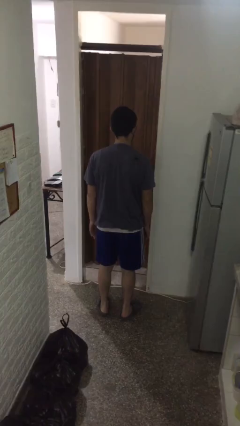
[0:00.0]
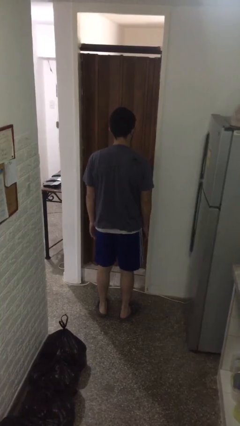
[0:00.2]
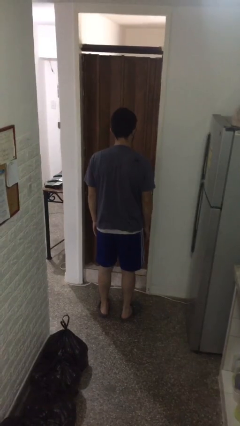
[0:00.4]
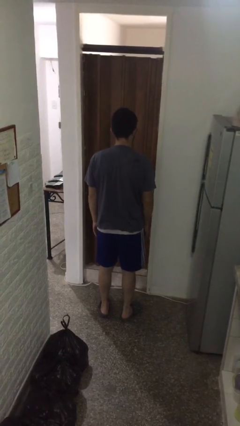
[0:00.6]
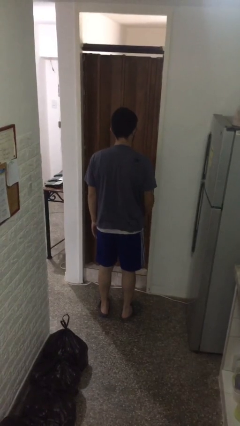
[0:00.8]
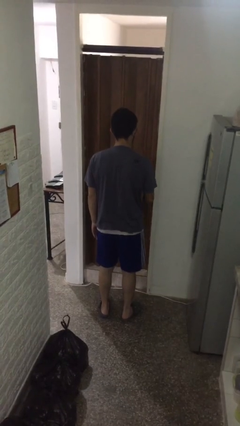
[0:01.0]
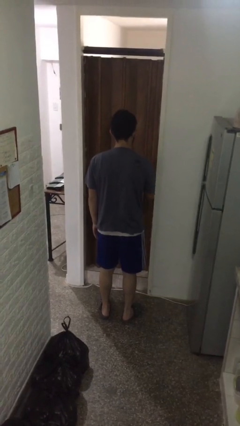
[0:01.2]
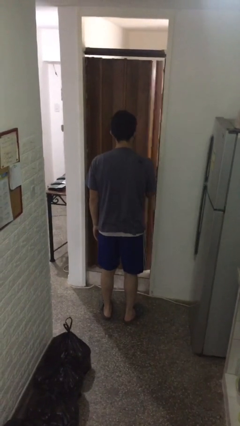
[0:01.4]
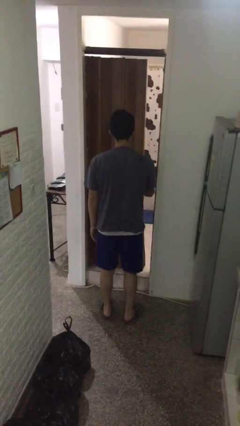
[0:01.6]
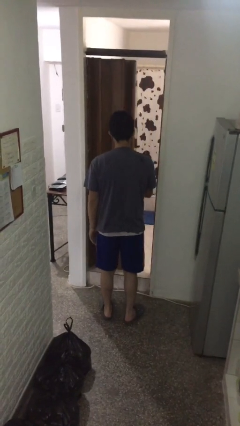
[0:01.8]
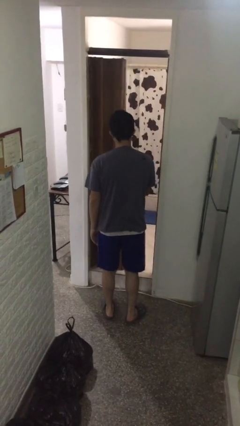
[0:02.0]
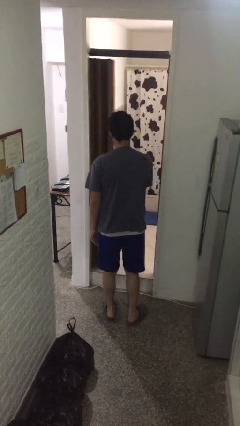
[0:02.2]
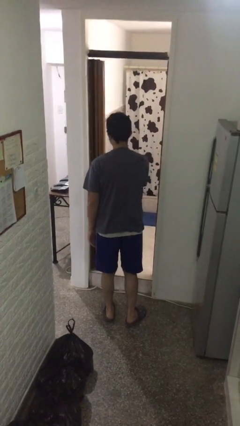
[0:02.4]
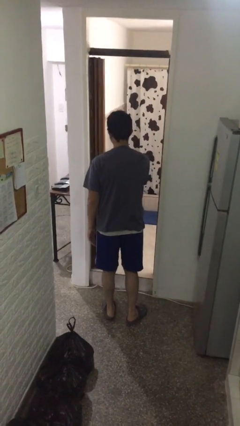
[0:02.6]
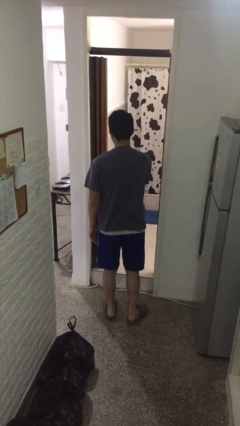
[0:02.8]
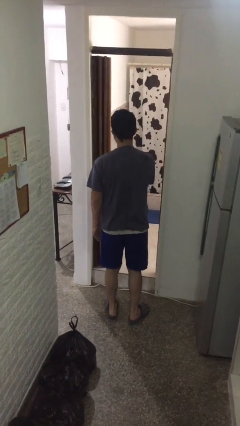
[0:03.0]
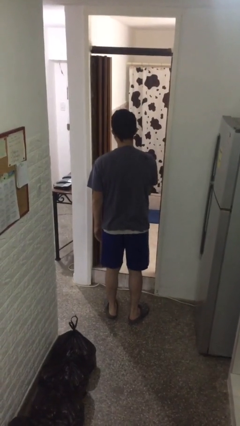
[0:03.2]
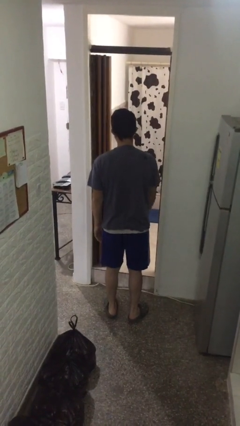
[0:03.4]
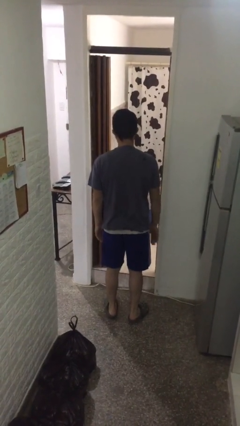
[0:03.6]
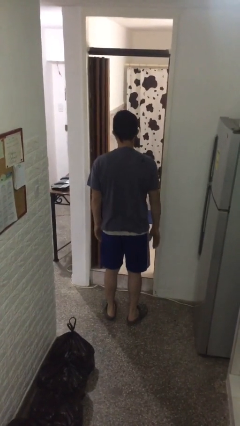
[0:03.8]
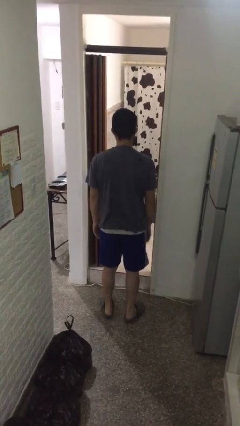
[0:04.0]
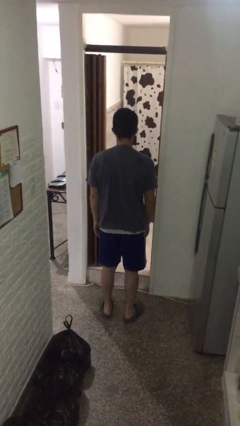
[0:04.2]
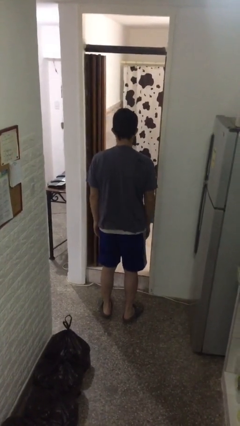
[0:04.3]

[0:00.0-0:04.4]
person opens sliding door

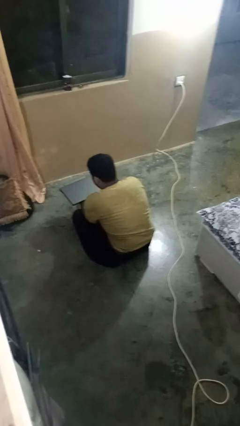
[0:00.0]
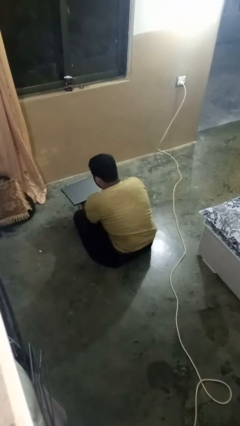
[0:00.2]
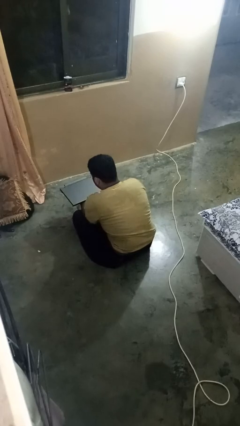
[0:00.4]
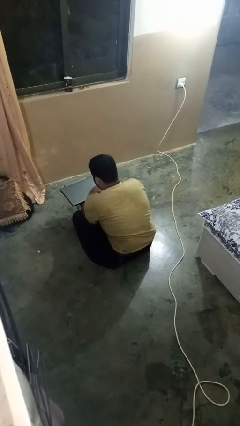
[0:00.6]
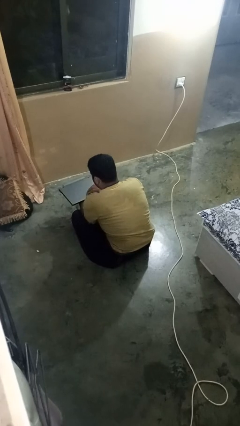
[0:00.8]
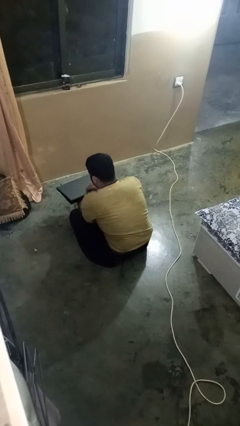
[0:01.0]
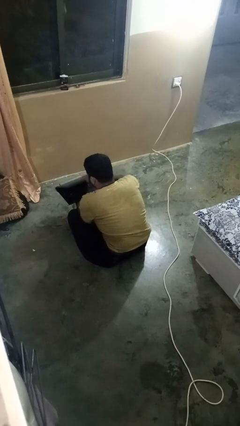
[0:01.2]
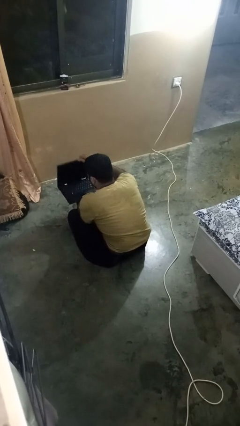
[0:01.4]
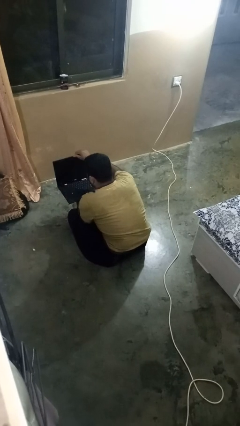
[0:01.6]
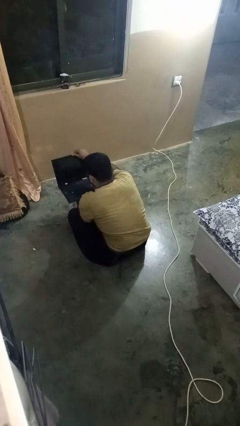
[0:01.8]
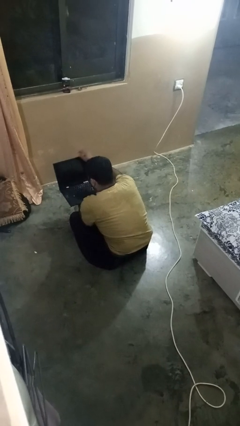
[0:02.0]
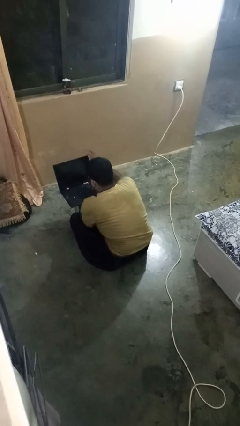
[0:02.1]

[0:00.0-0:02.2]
person opens laptop

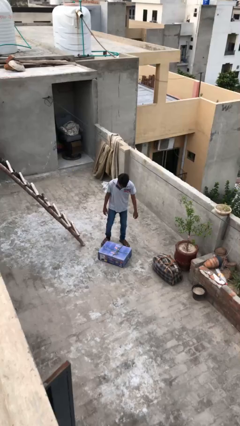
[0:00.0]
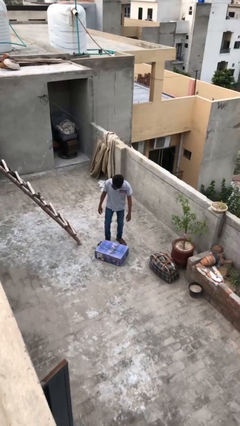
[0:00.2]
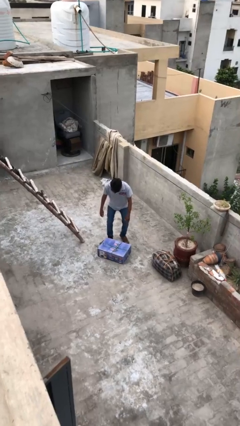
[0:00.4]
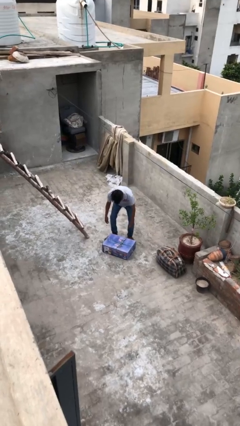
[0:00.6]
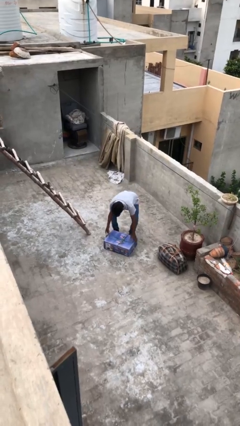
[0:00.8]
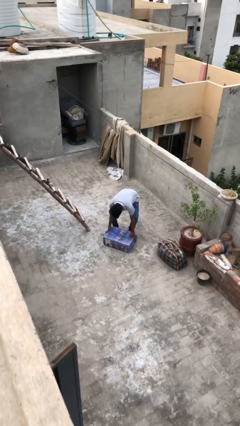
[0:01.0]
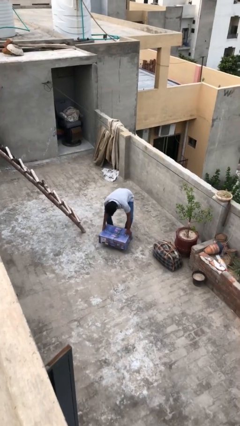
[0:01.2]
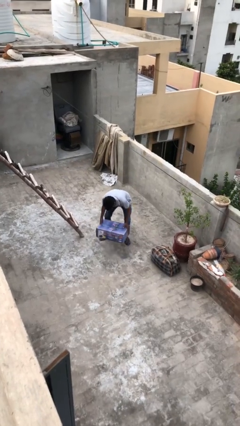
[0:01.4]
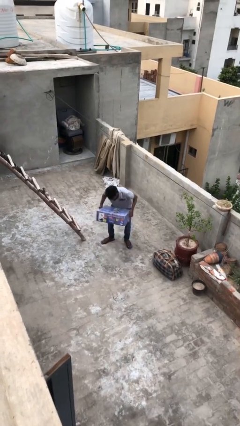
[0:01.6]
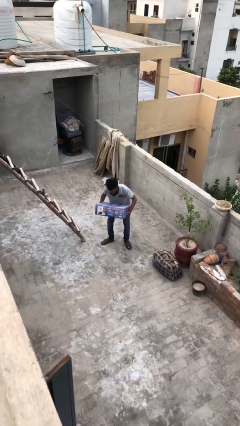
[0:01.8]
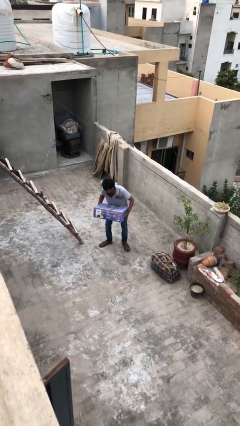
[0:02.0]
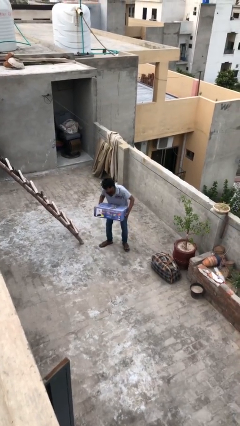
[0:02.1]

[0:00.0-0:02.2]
person picks up object from floor

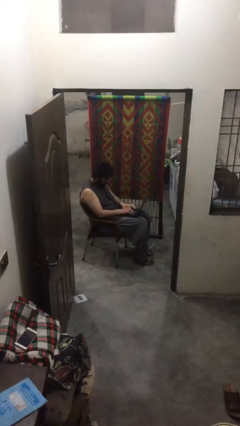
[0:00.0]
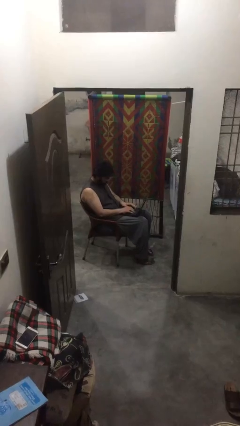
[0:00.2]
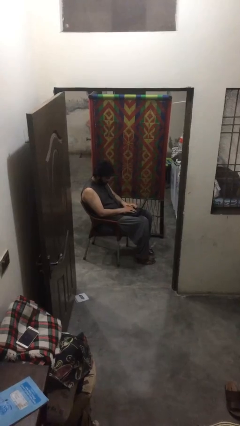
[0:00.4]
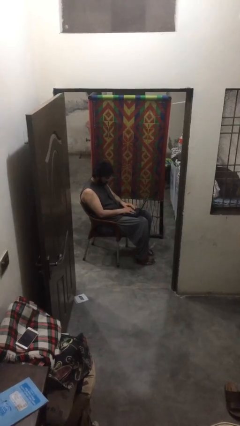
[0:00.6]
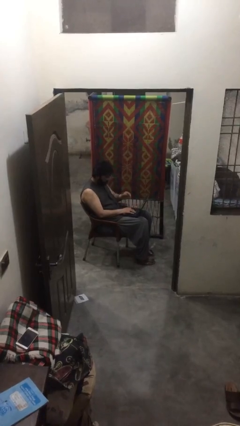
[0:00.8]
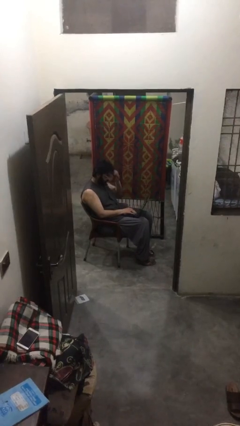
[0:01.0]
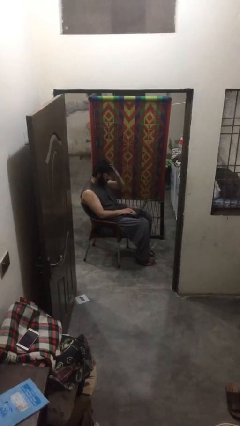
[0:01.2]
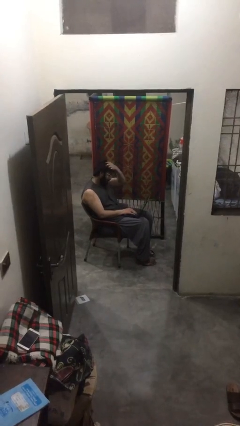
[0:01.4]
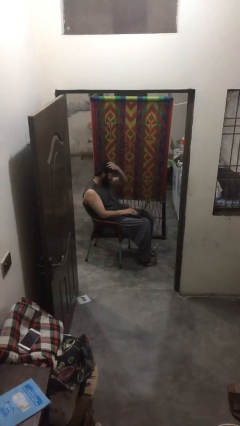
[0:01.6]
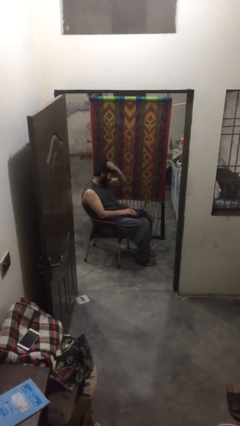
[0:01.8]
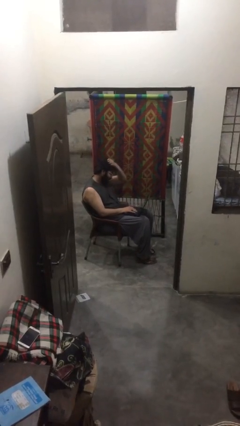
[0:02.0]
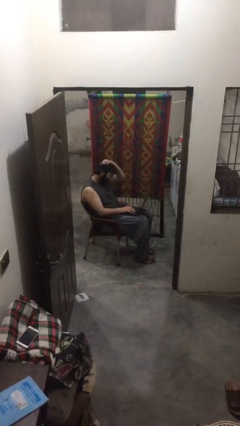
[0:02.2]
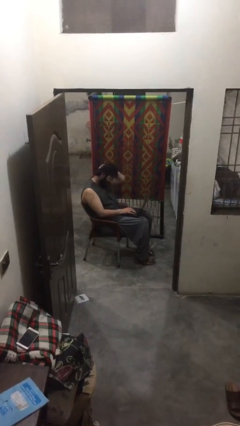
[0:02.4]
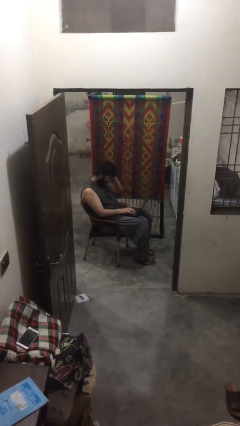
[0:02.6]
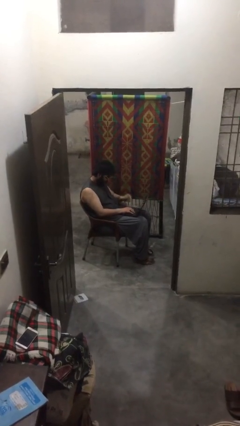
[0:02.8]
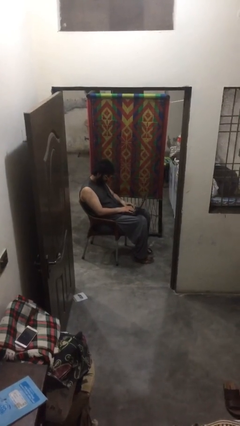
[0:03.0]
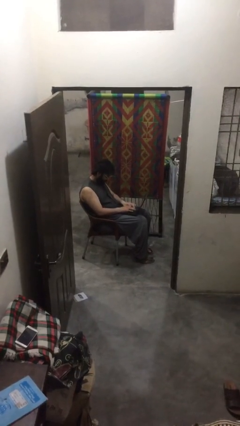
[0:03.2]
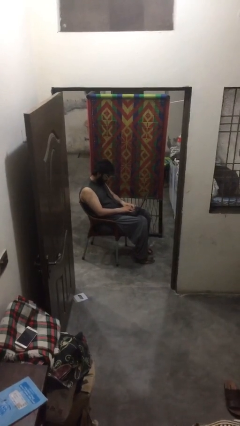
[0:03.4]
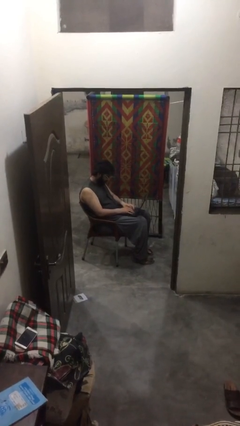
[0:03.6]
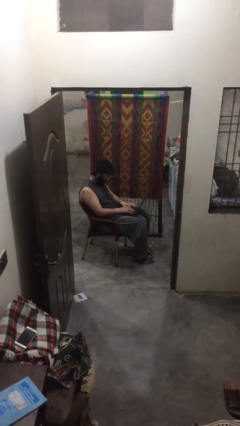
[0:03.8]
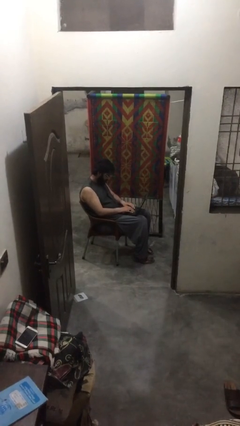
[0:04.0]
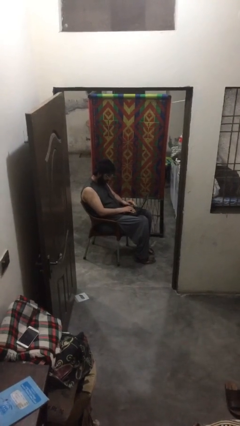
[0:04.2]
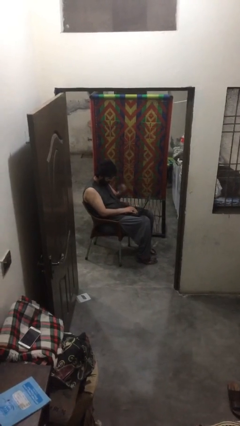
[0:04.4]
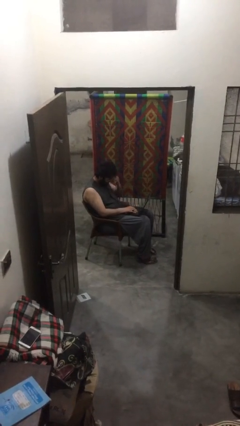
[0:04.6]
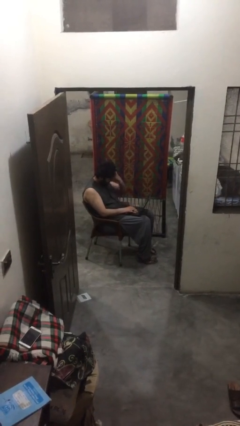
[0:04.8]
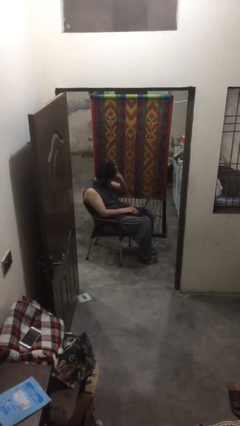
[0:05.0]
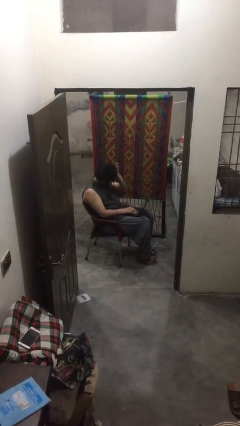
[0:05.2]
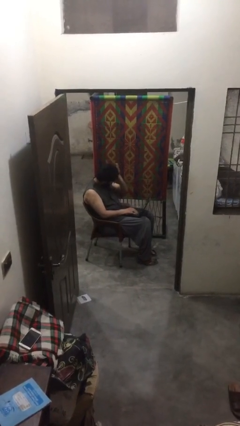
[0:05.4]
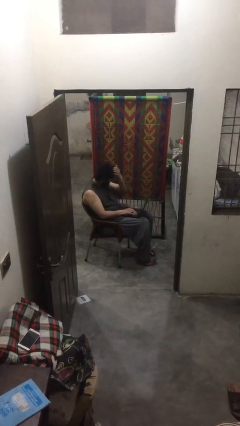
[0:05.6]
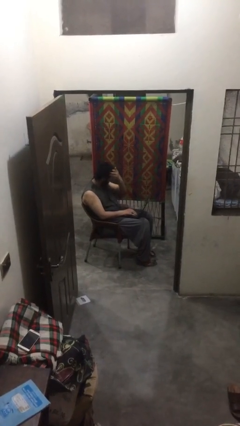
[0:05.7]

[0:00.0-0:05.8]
person interacts with laptop

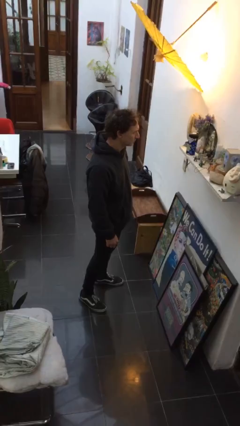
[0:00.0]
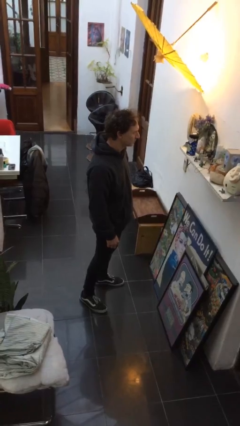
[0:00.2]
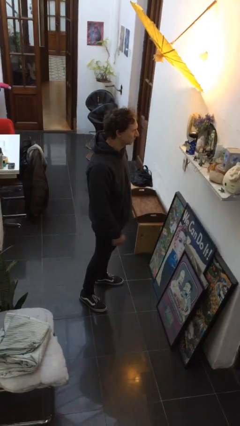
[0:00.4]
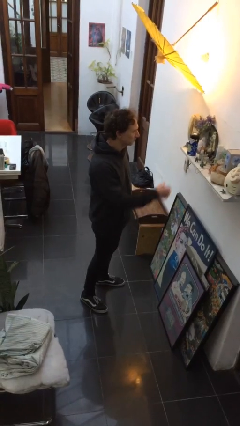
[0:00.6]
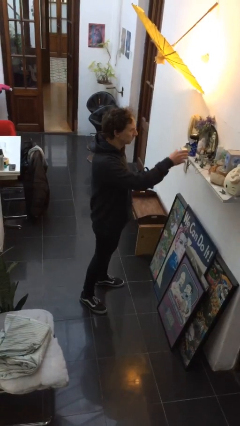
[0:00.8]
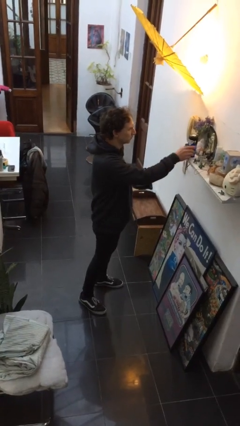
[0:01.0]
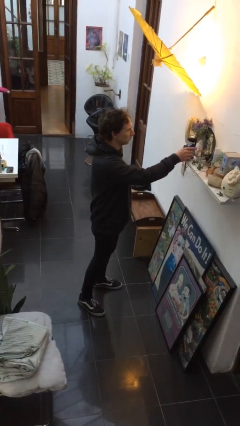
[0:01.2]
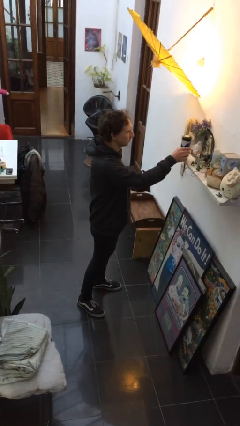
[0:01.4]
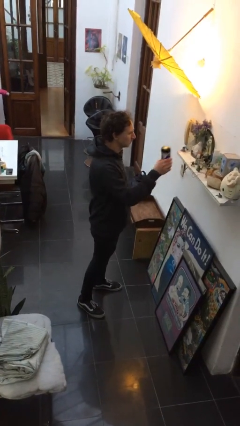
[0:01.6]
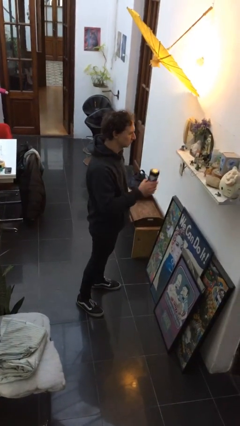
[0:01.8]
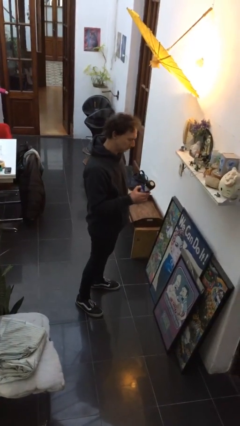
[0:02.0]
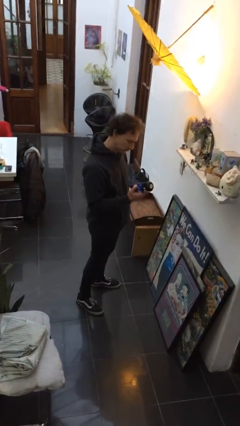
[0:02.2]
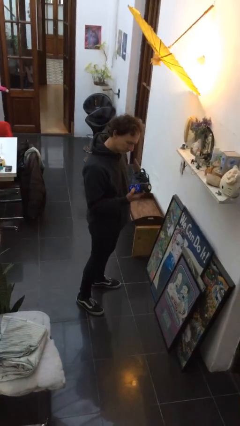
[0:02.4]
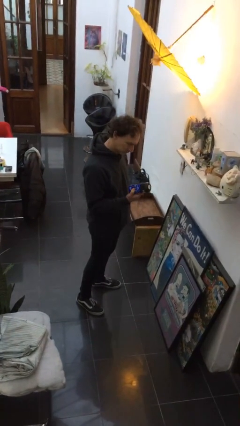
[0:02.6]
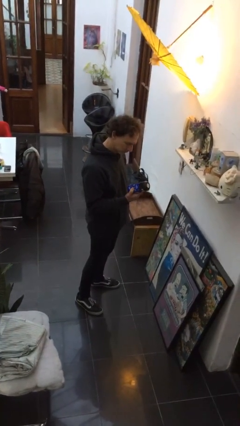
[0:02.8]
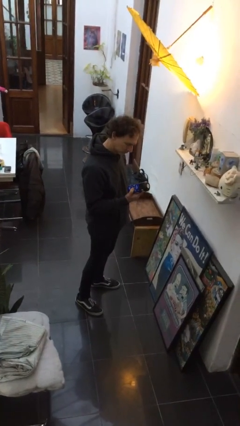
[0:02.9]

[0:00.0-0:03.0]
person picks up object from shelf

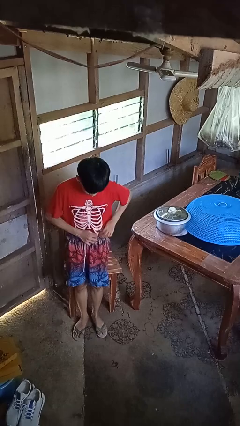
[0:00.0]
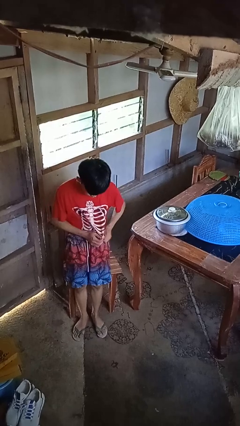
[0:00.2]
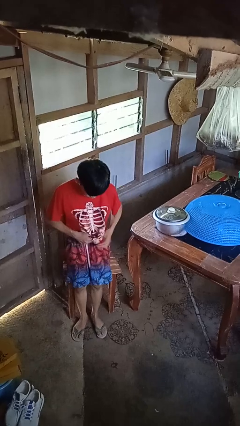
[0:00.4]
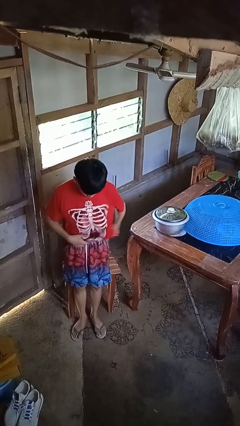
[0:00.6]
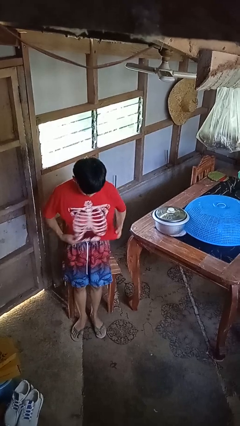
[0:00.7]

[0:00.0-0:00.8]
person untucks shirt
